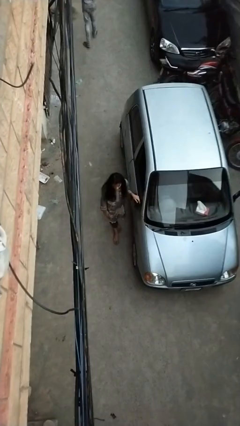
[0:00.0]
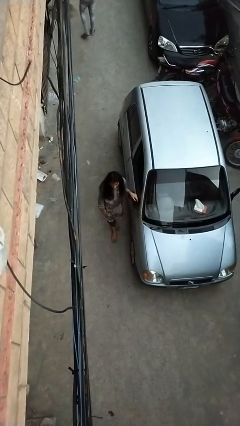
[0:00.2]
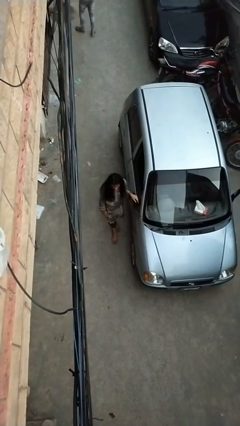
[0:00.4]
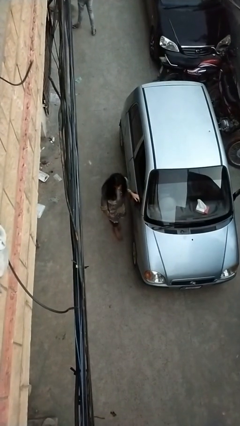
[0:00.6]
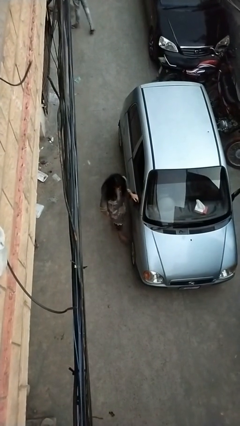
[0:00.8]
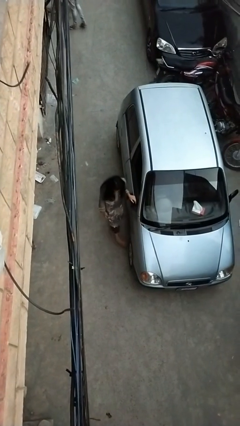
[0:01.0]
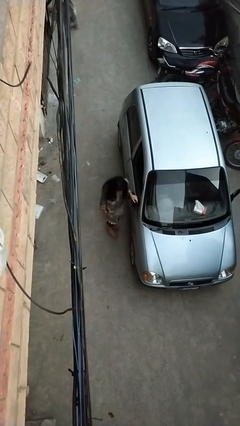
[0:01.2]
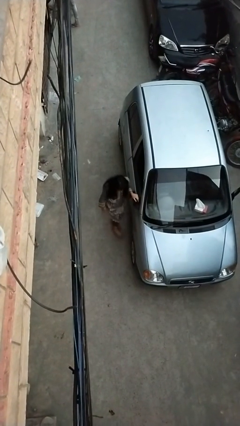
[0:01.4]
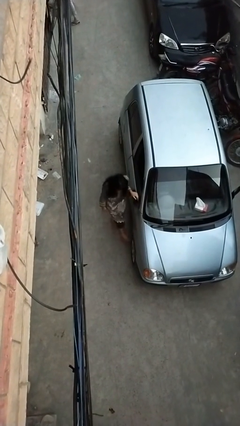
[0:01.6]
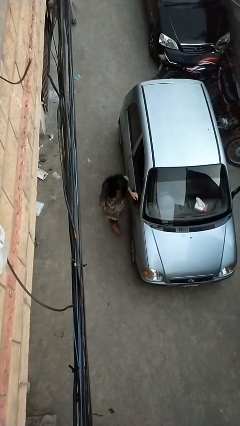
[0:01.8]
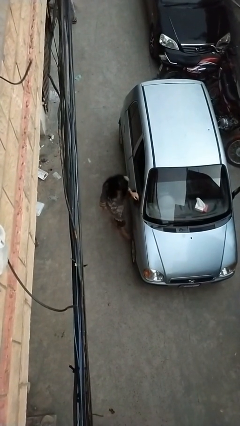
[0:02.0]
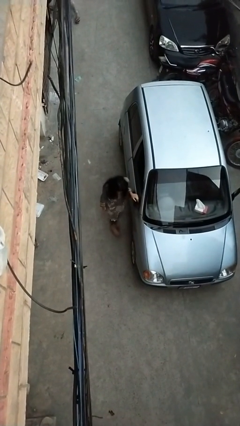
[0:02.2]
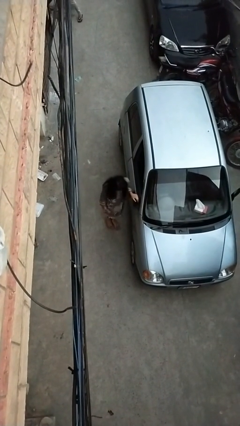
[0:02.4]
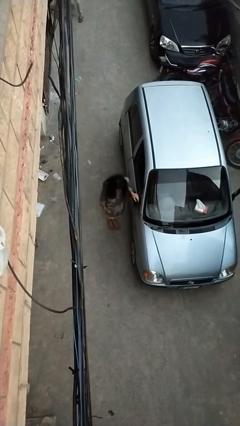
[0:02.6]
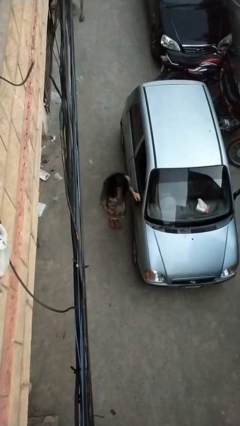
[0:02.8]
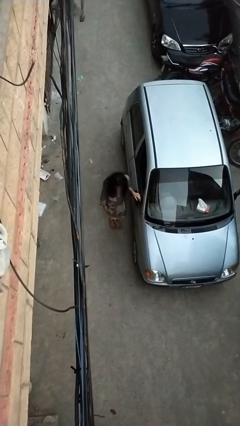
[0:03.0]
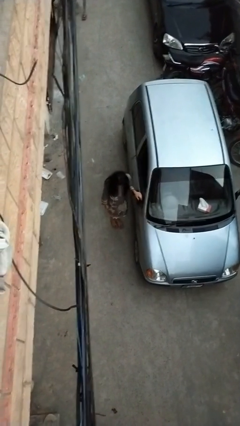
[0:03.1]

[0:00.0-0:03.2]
person kicks car tires

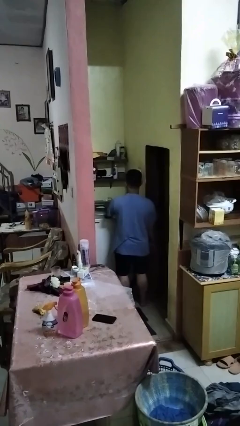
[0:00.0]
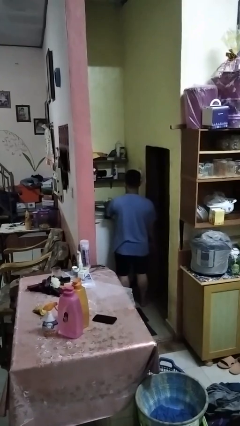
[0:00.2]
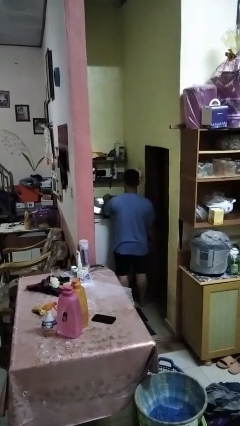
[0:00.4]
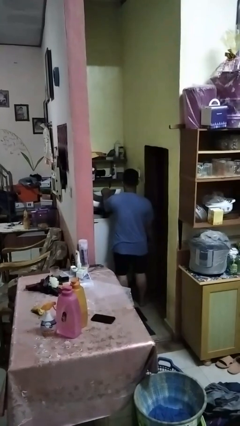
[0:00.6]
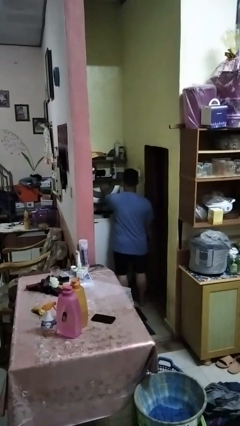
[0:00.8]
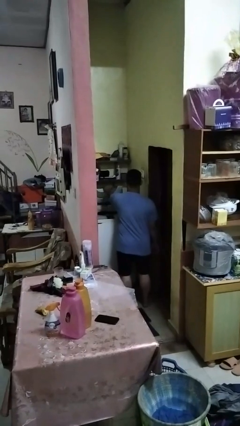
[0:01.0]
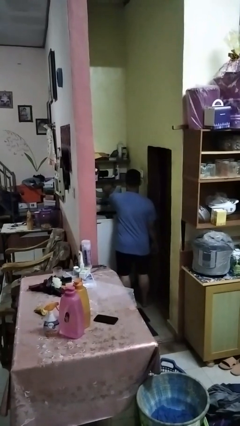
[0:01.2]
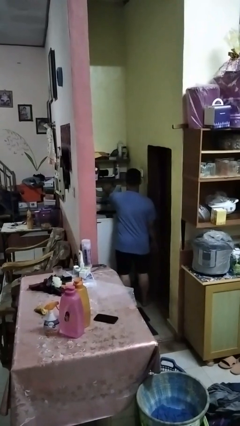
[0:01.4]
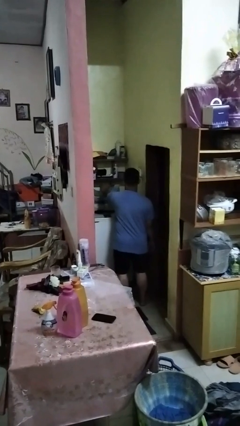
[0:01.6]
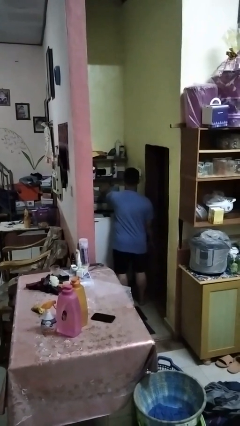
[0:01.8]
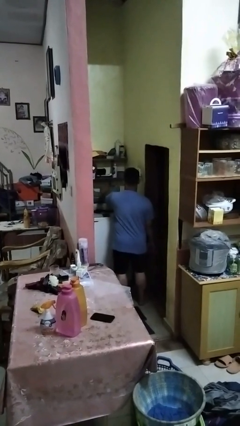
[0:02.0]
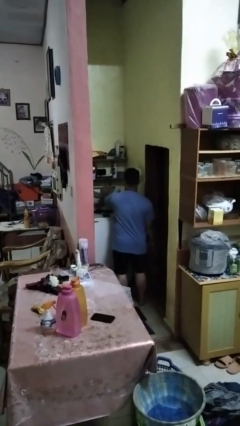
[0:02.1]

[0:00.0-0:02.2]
person opens clothes washer

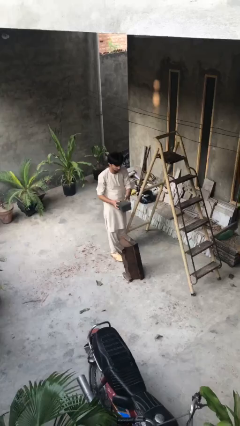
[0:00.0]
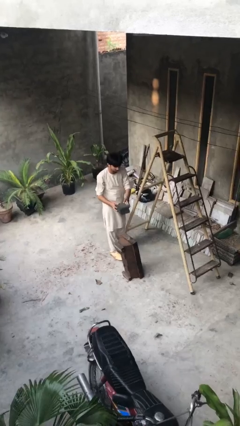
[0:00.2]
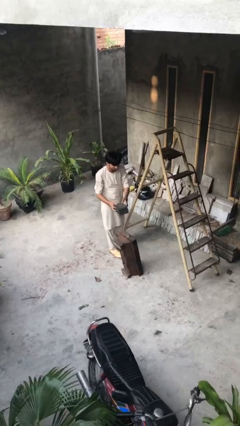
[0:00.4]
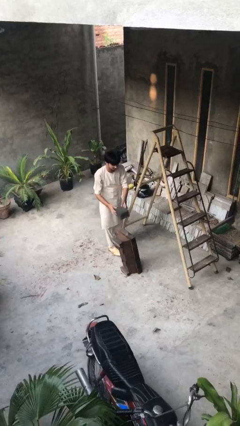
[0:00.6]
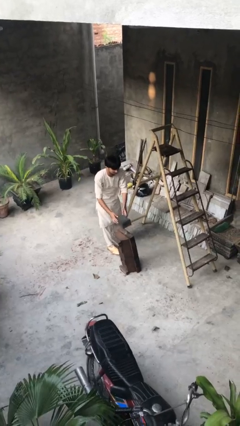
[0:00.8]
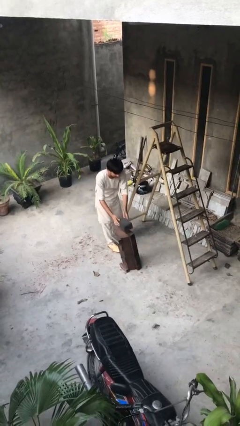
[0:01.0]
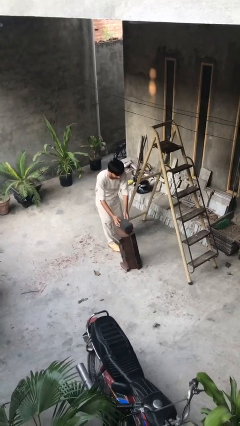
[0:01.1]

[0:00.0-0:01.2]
person puts down object on table

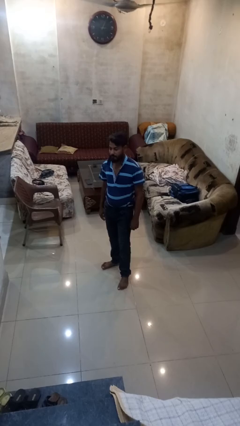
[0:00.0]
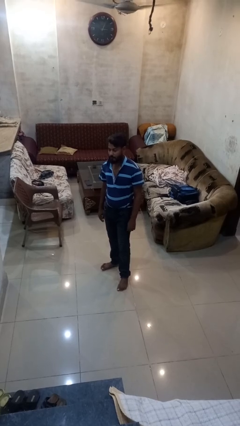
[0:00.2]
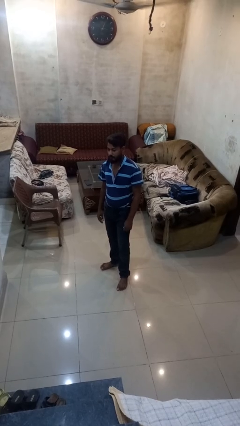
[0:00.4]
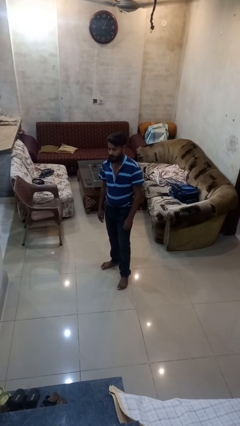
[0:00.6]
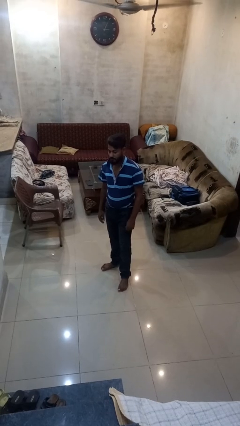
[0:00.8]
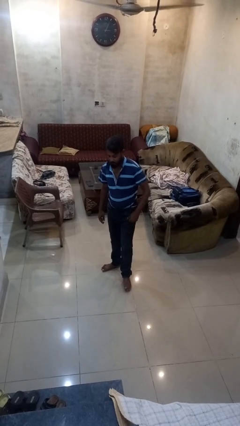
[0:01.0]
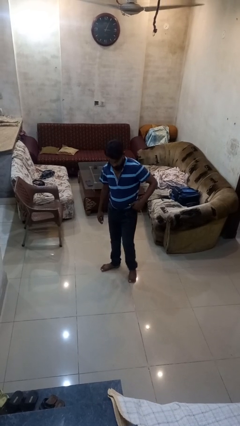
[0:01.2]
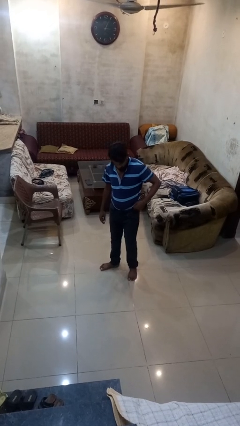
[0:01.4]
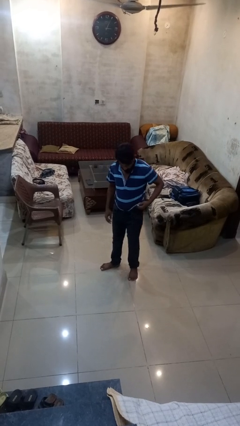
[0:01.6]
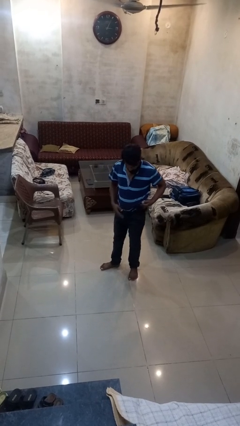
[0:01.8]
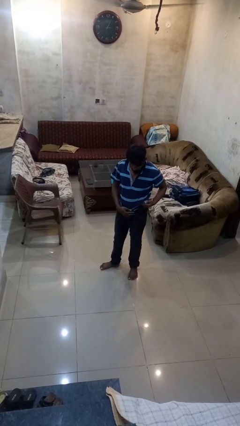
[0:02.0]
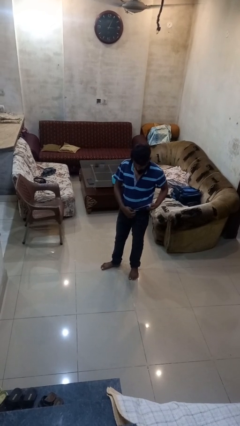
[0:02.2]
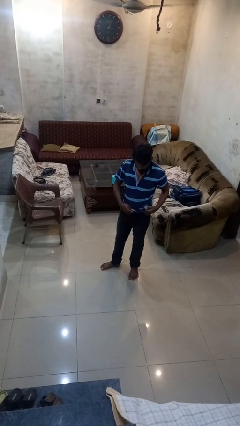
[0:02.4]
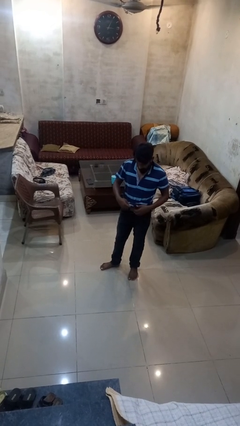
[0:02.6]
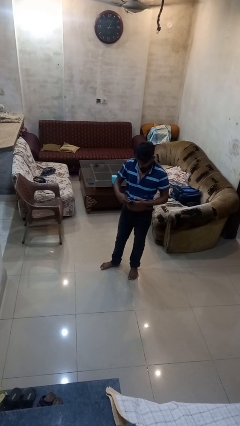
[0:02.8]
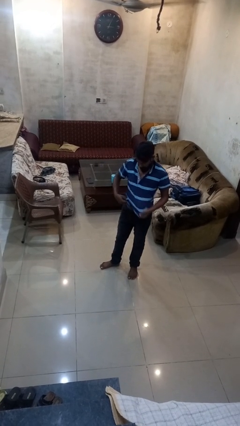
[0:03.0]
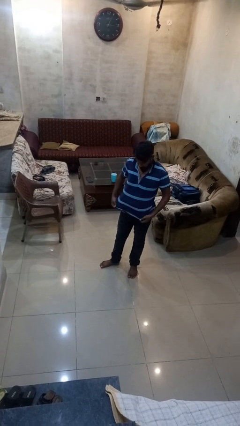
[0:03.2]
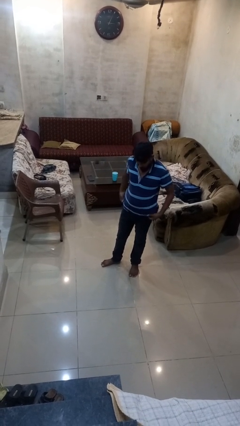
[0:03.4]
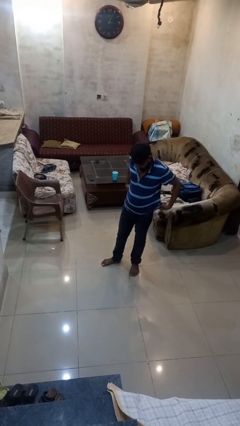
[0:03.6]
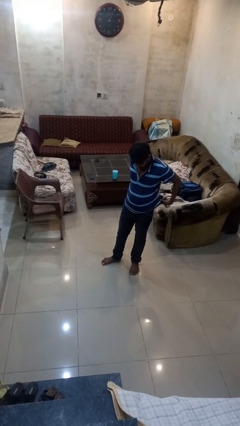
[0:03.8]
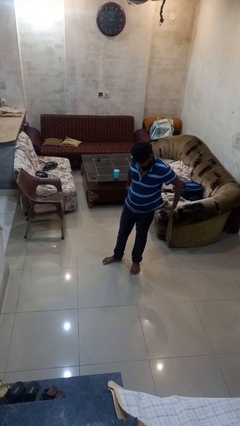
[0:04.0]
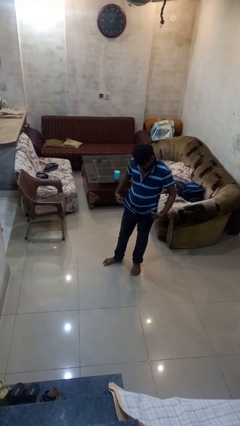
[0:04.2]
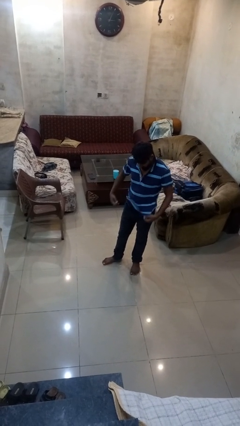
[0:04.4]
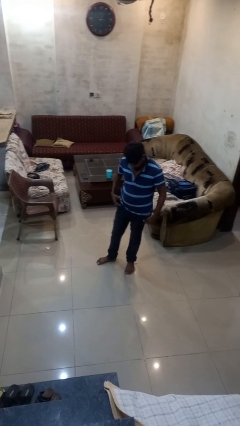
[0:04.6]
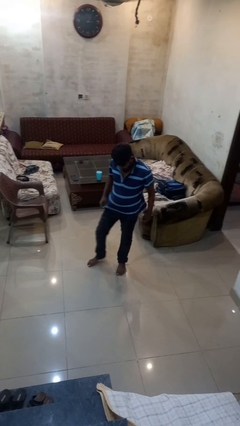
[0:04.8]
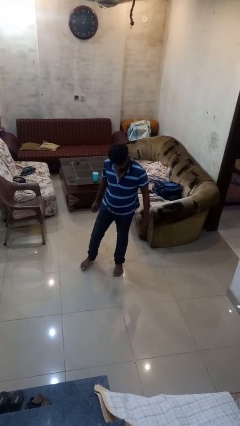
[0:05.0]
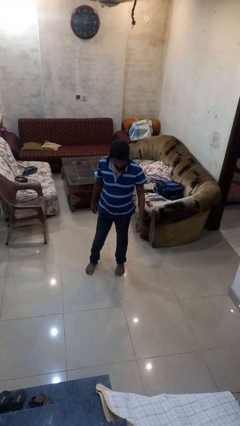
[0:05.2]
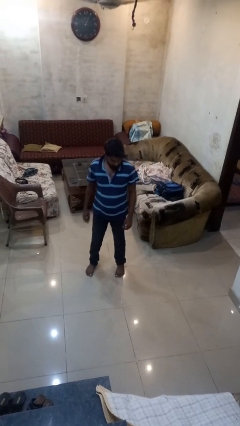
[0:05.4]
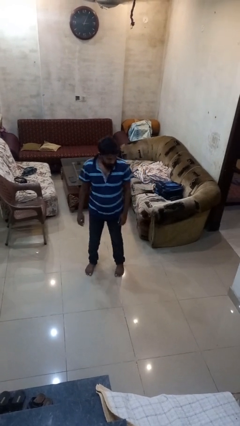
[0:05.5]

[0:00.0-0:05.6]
person untucks shirt

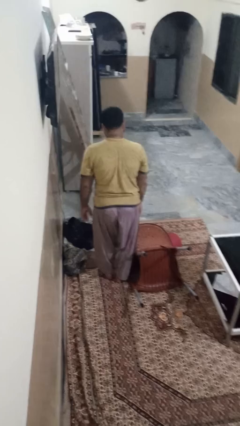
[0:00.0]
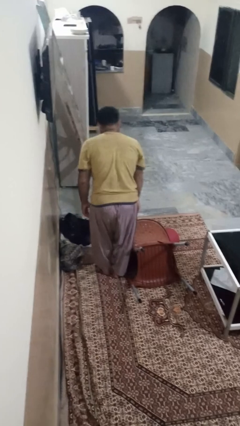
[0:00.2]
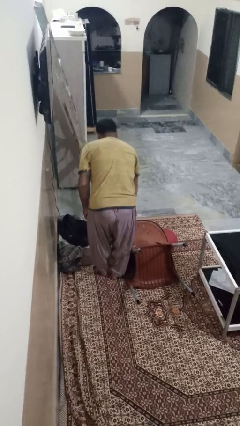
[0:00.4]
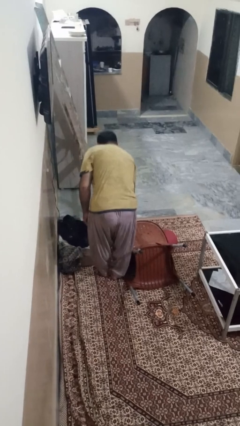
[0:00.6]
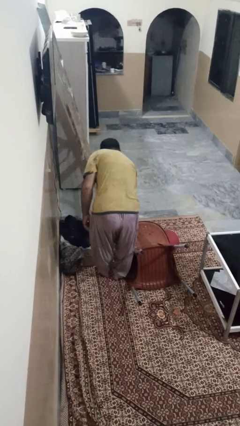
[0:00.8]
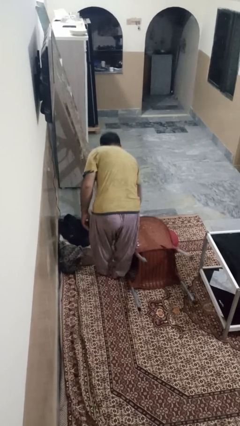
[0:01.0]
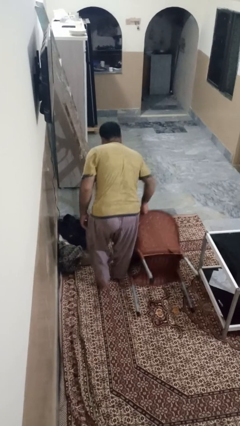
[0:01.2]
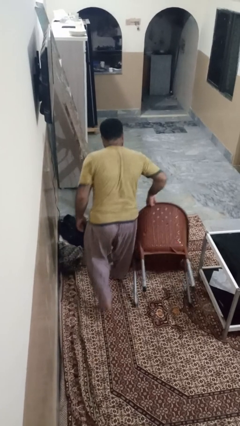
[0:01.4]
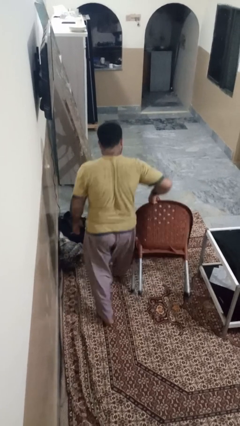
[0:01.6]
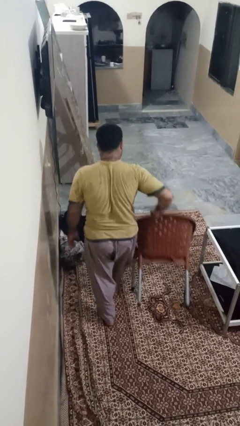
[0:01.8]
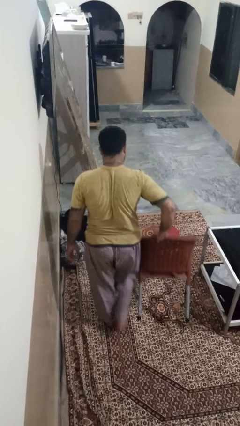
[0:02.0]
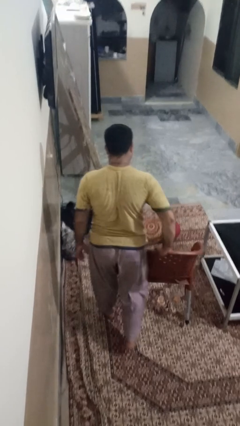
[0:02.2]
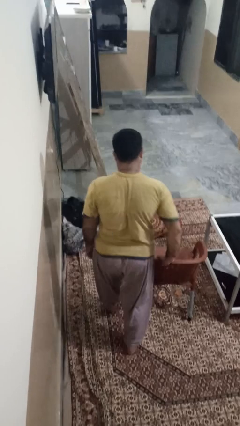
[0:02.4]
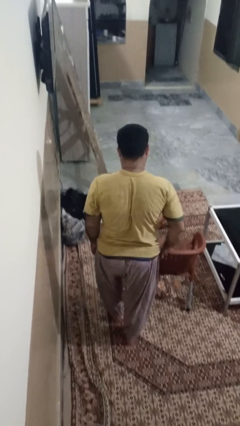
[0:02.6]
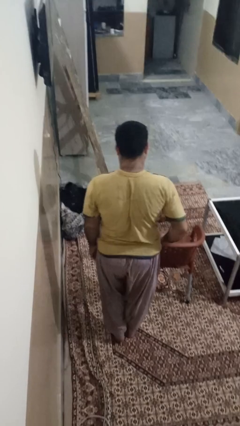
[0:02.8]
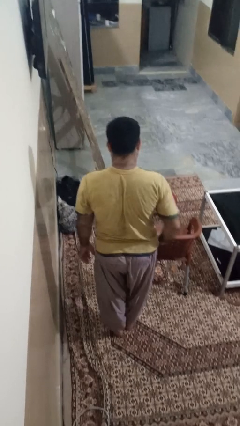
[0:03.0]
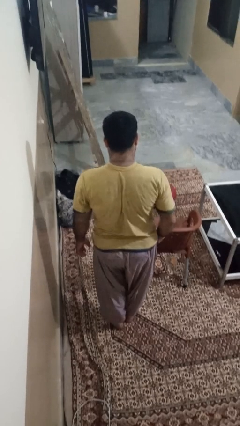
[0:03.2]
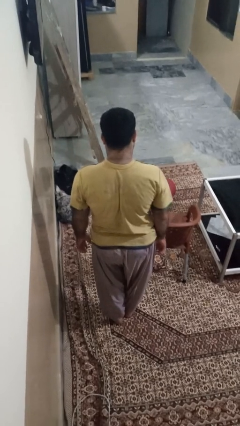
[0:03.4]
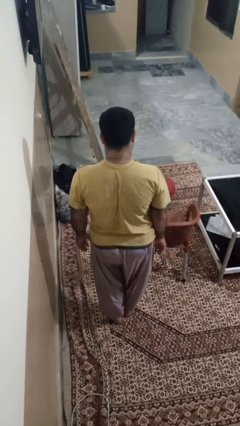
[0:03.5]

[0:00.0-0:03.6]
person sets upright furniture

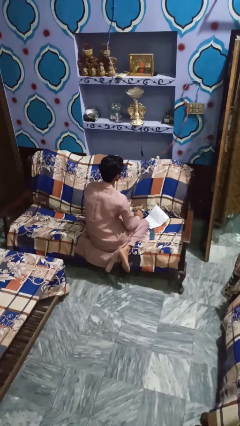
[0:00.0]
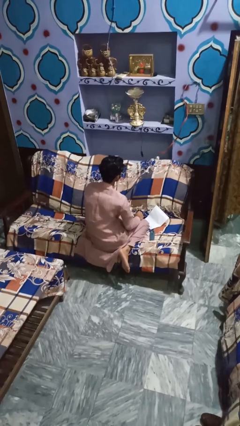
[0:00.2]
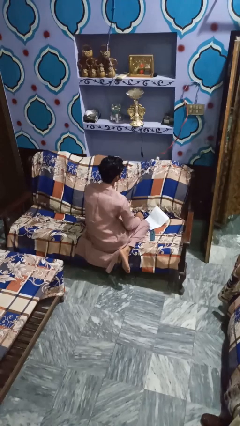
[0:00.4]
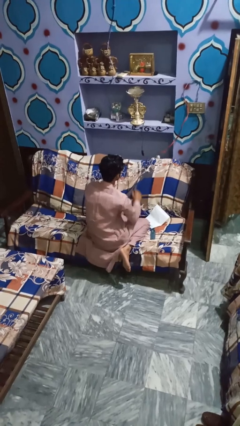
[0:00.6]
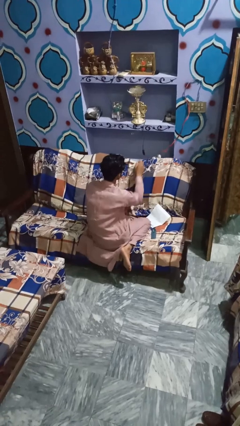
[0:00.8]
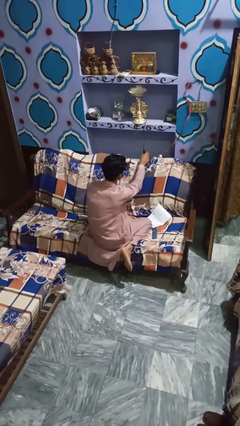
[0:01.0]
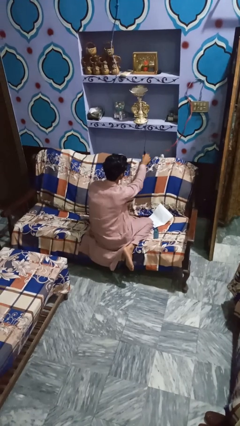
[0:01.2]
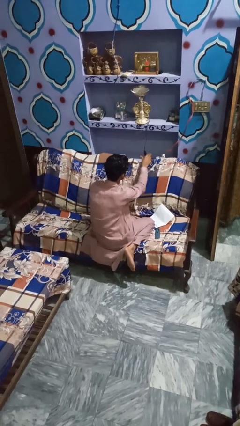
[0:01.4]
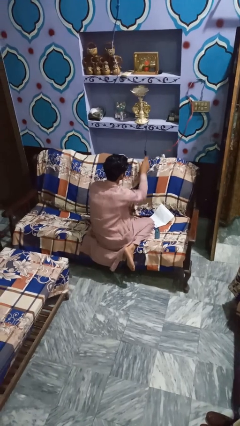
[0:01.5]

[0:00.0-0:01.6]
person turns off lamp
